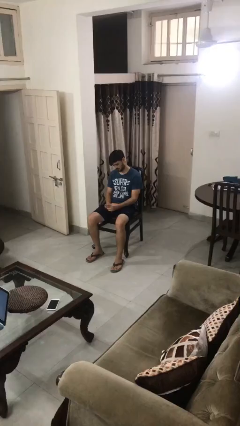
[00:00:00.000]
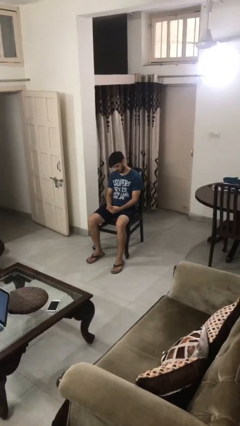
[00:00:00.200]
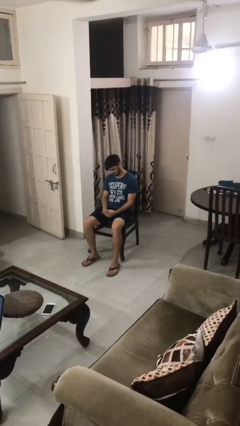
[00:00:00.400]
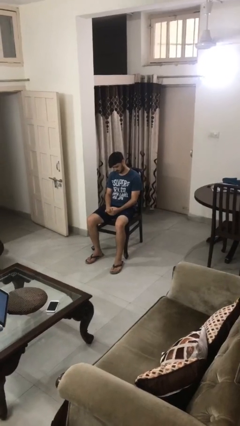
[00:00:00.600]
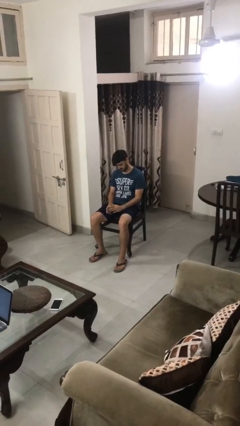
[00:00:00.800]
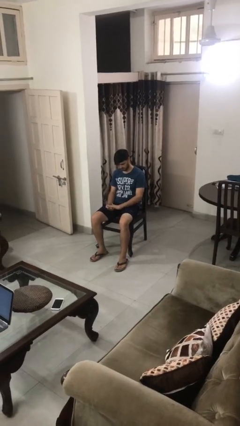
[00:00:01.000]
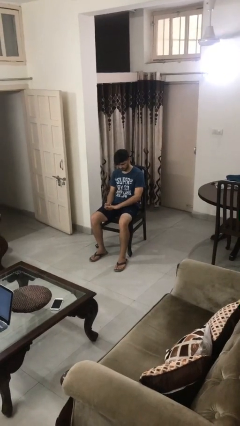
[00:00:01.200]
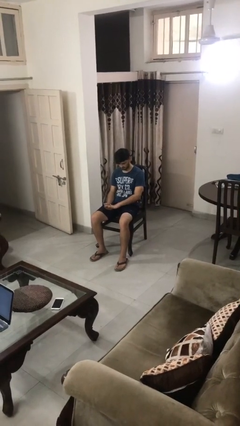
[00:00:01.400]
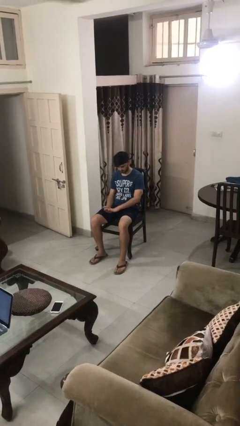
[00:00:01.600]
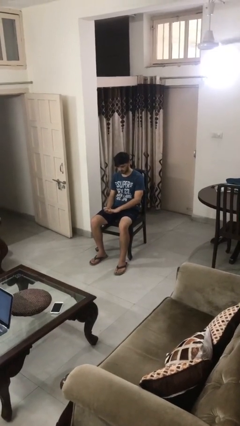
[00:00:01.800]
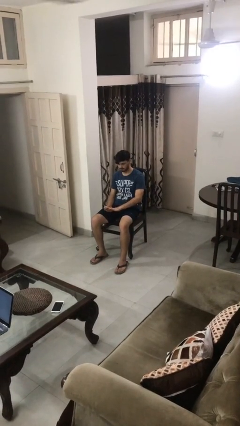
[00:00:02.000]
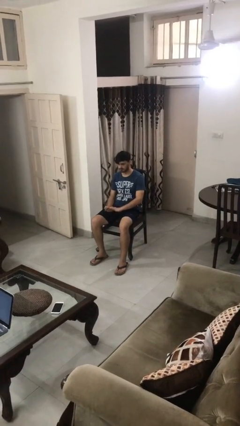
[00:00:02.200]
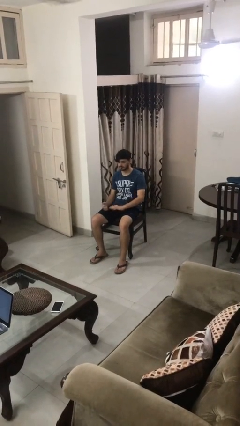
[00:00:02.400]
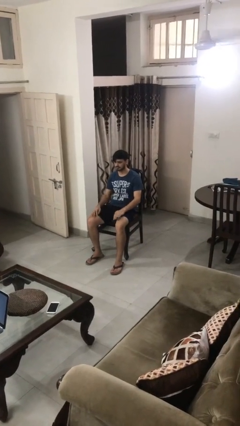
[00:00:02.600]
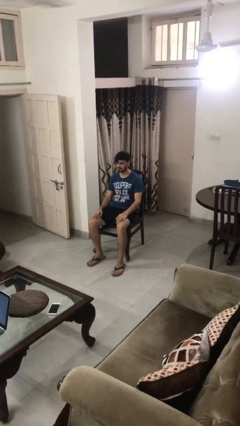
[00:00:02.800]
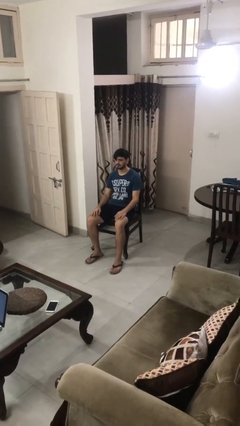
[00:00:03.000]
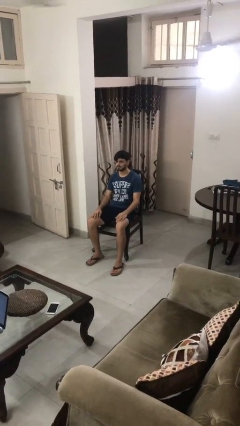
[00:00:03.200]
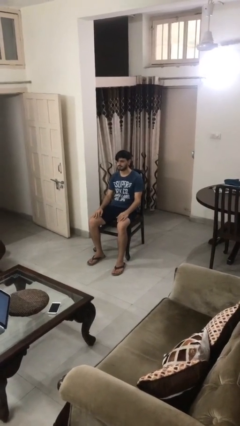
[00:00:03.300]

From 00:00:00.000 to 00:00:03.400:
person looks at hands in lap

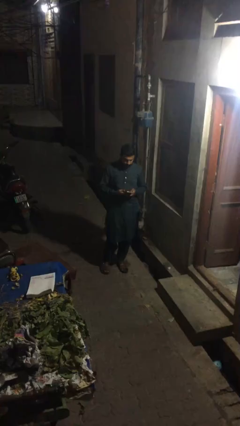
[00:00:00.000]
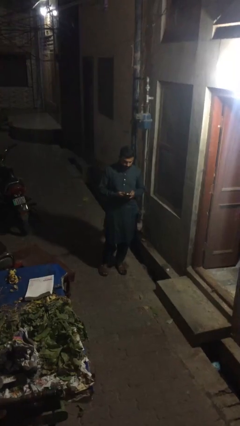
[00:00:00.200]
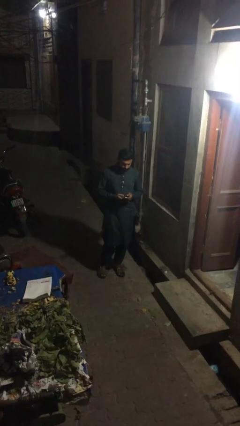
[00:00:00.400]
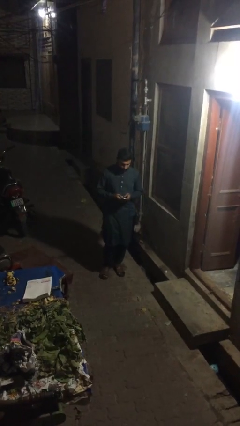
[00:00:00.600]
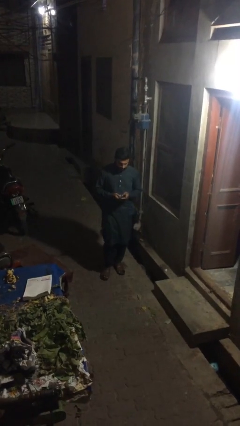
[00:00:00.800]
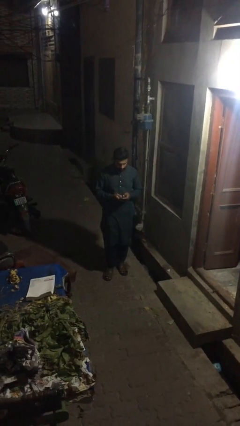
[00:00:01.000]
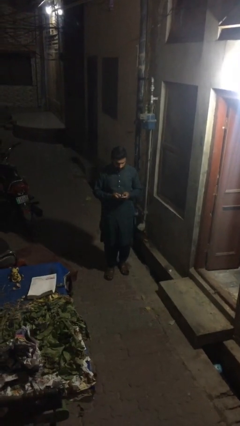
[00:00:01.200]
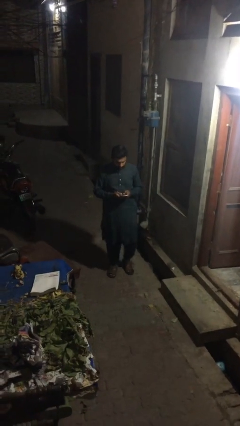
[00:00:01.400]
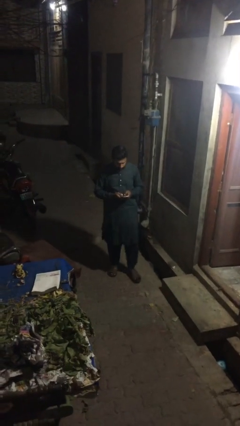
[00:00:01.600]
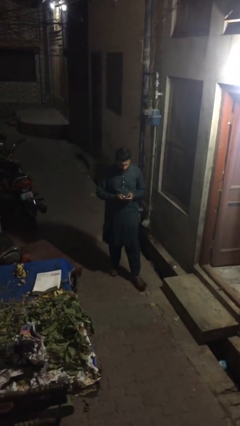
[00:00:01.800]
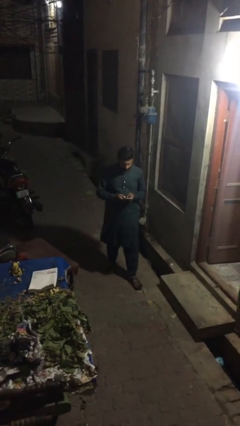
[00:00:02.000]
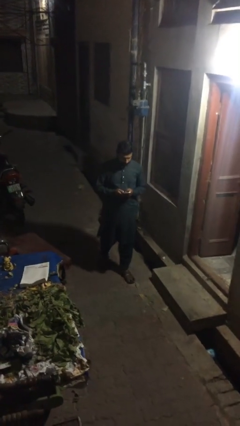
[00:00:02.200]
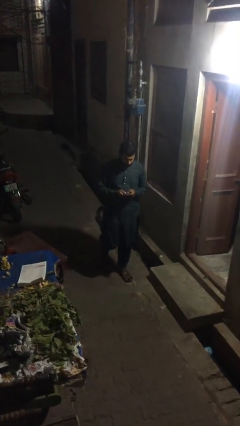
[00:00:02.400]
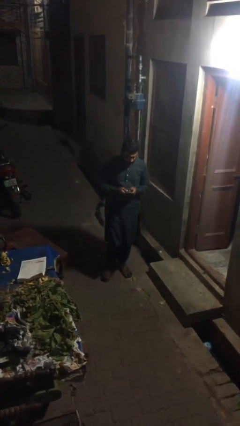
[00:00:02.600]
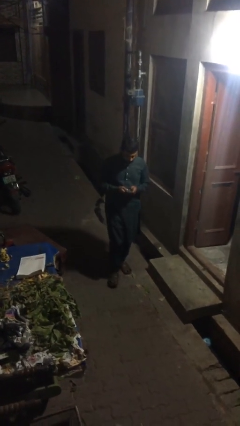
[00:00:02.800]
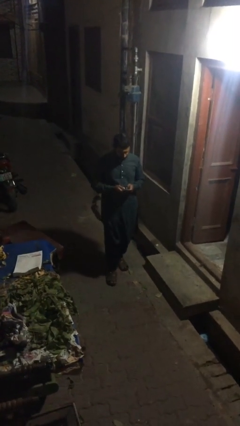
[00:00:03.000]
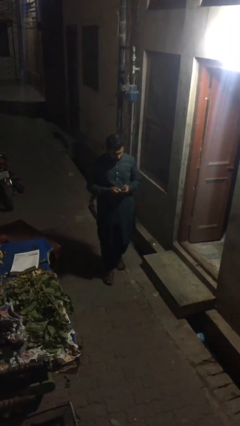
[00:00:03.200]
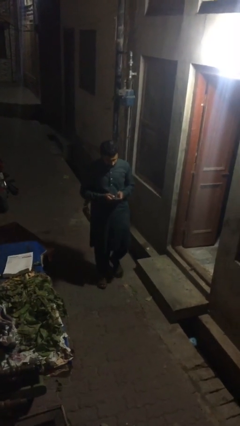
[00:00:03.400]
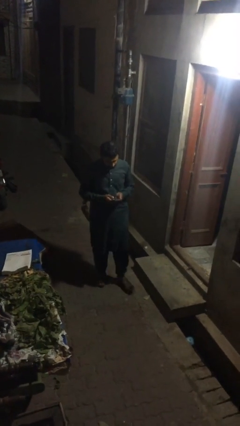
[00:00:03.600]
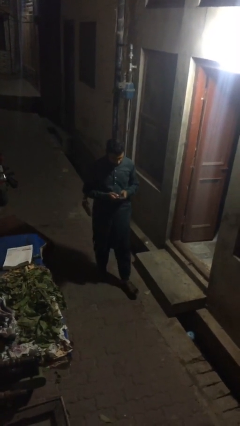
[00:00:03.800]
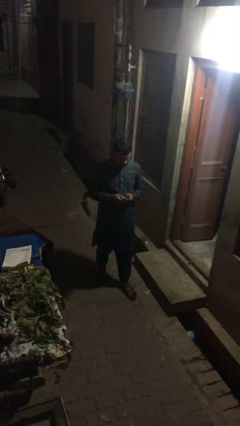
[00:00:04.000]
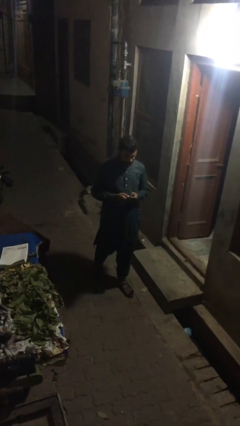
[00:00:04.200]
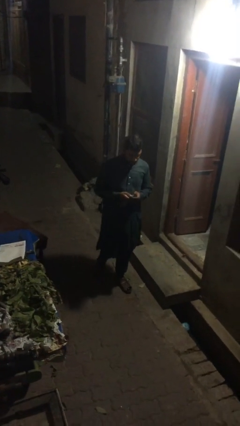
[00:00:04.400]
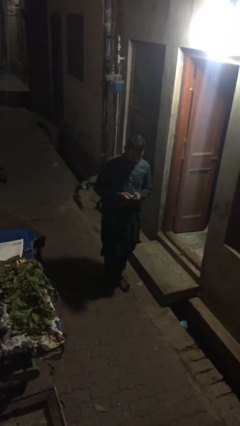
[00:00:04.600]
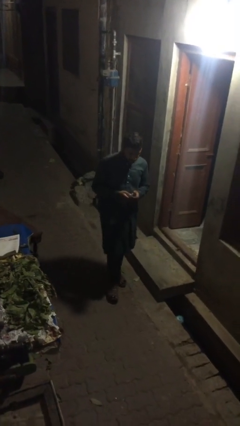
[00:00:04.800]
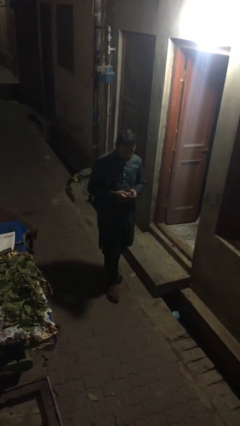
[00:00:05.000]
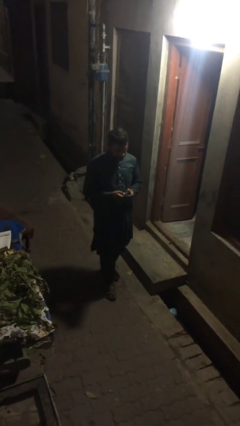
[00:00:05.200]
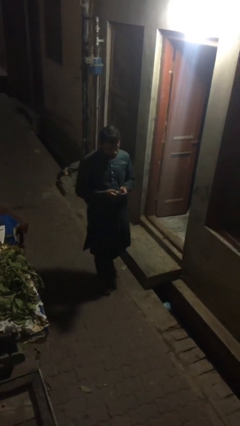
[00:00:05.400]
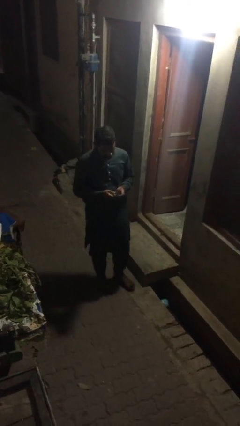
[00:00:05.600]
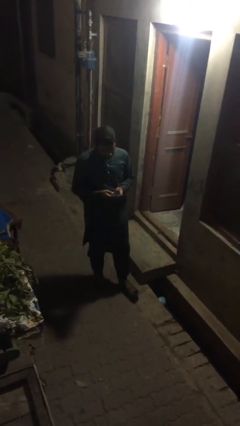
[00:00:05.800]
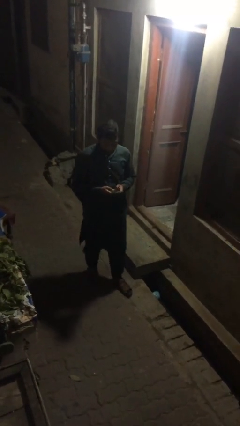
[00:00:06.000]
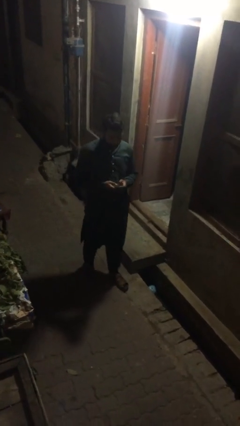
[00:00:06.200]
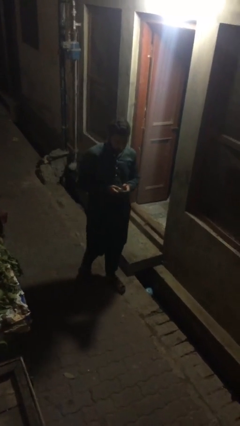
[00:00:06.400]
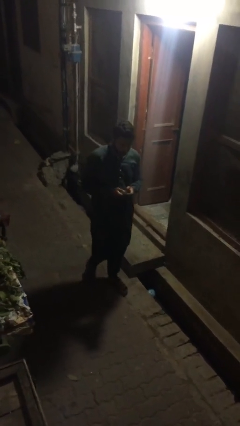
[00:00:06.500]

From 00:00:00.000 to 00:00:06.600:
person texts on phone

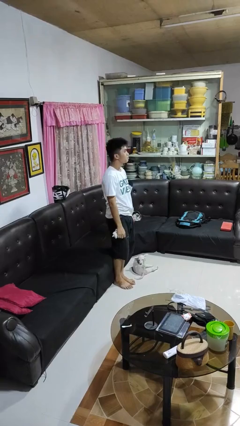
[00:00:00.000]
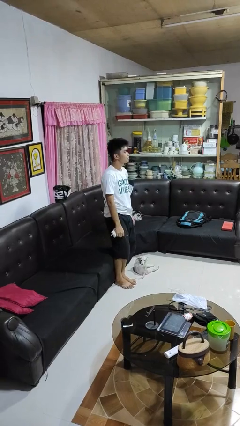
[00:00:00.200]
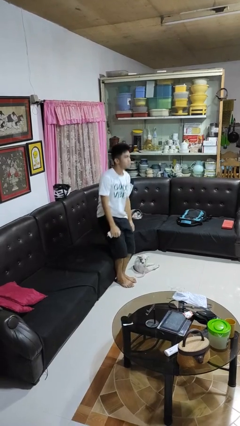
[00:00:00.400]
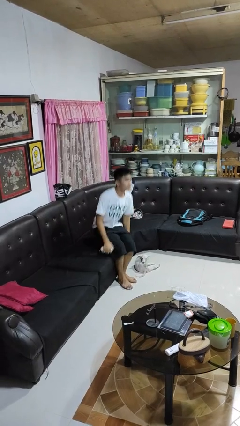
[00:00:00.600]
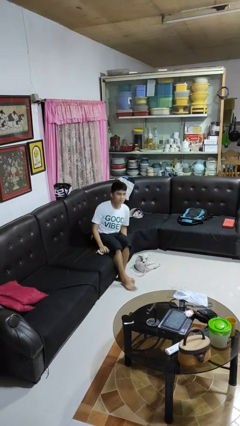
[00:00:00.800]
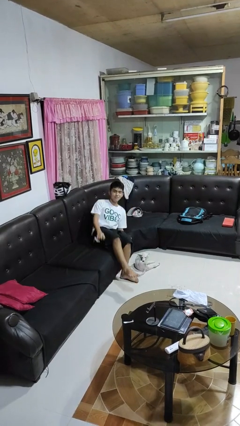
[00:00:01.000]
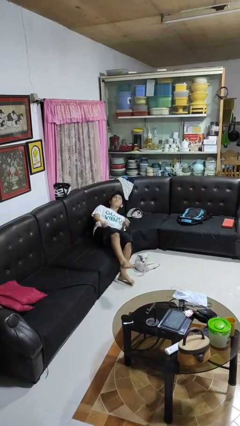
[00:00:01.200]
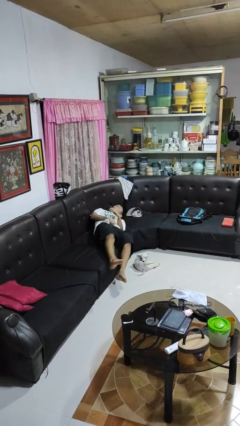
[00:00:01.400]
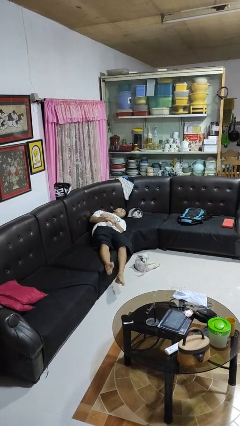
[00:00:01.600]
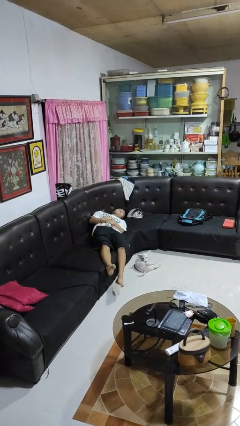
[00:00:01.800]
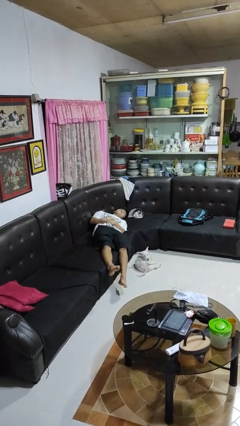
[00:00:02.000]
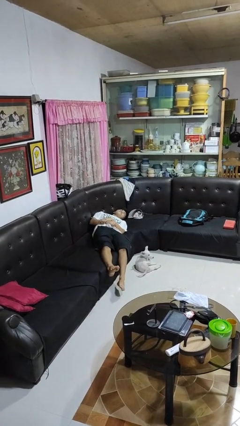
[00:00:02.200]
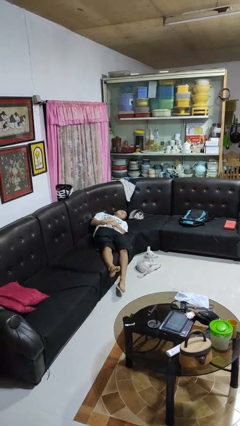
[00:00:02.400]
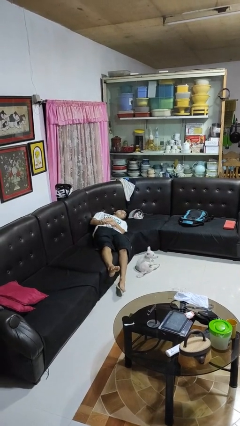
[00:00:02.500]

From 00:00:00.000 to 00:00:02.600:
person lies down on couch

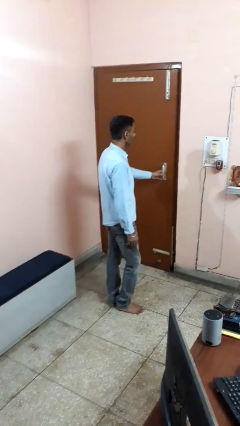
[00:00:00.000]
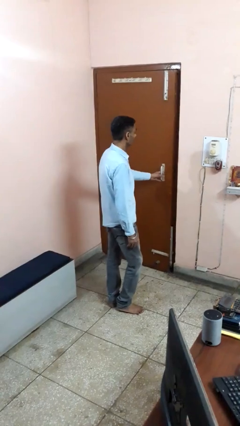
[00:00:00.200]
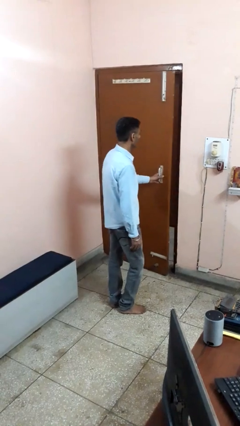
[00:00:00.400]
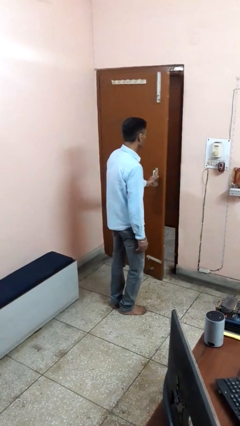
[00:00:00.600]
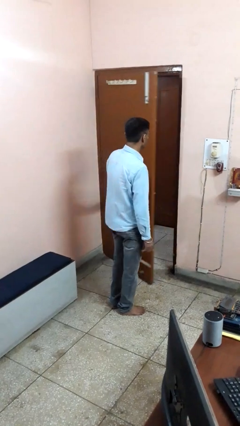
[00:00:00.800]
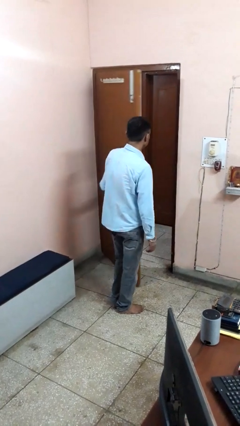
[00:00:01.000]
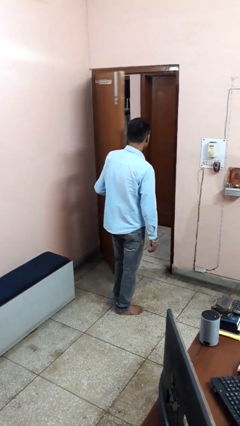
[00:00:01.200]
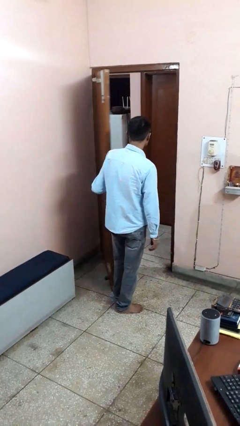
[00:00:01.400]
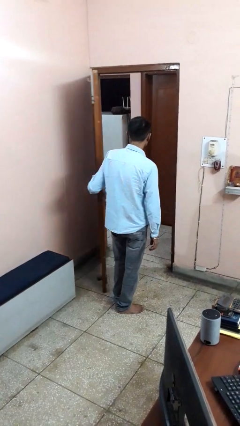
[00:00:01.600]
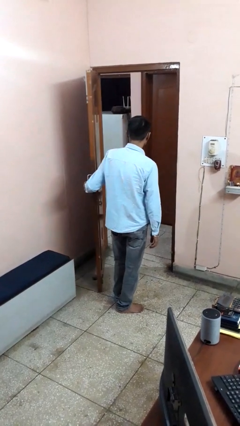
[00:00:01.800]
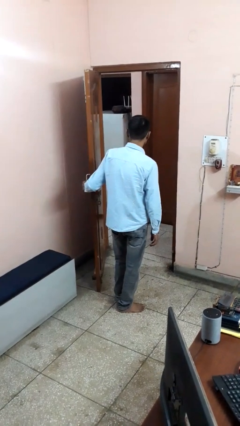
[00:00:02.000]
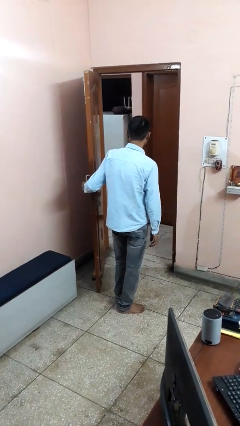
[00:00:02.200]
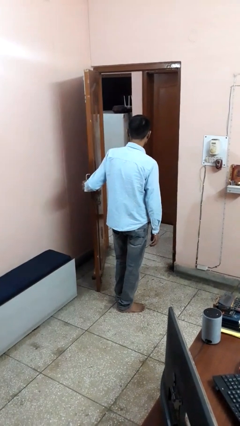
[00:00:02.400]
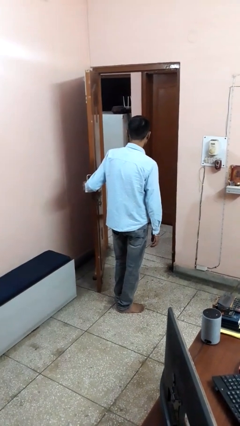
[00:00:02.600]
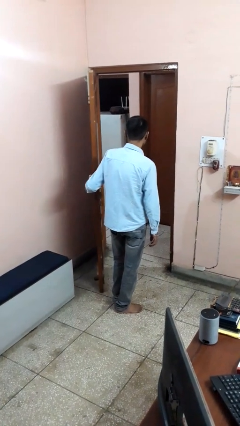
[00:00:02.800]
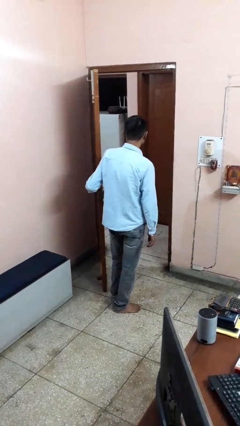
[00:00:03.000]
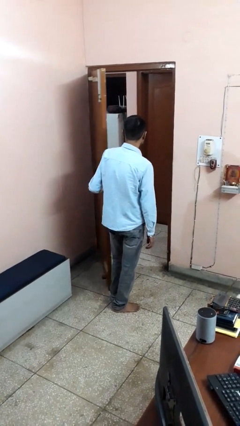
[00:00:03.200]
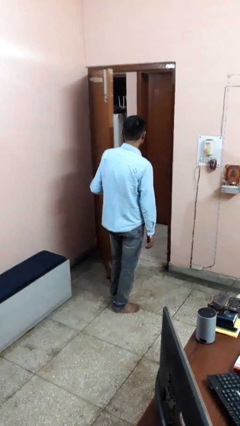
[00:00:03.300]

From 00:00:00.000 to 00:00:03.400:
person opens facility door

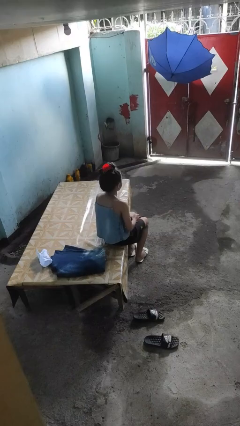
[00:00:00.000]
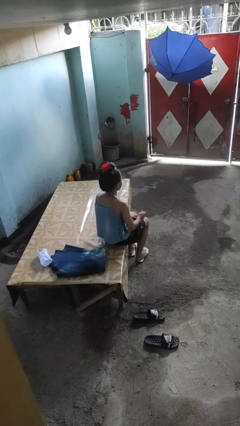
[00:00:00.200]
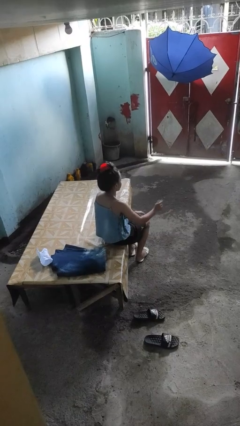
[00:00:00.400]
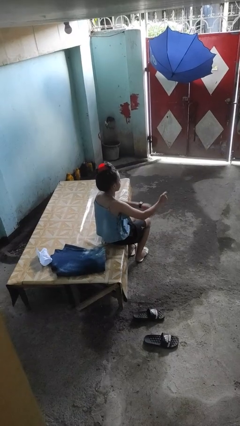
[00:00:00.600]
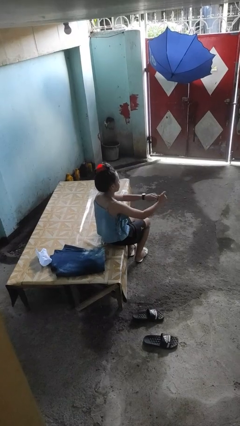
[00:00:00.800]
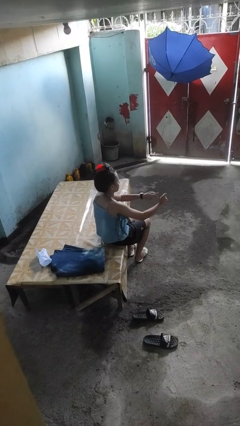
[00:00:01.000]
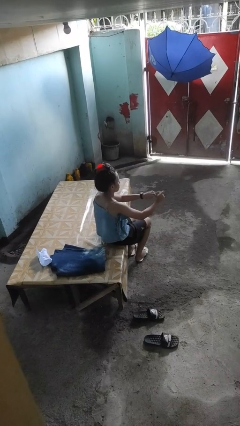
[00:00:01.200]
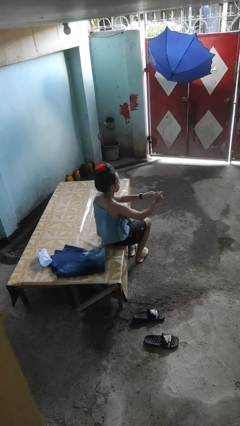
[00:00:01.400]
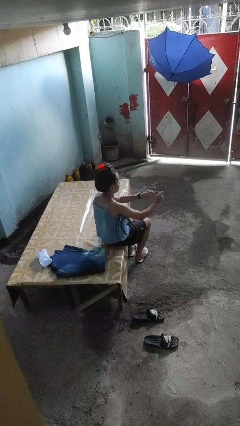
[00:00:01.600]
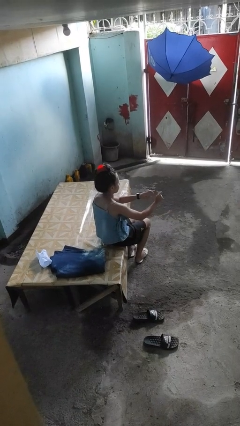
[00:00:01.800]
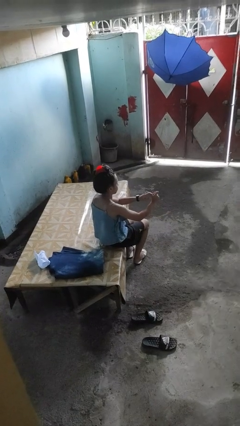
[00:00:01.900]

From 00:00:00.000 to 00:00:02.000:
person clips fingernails
